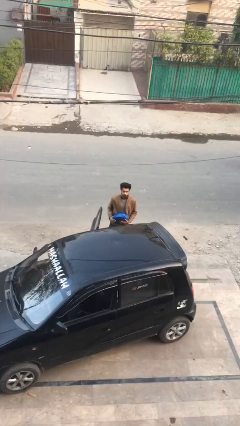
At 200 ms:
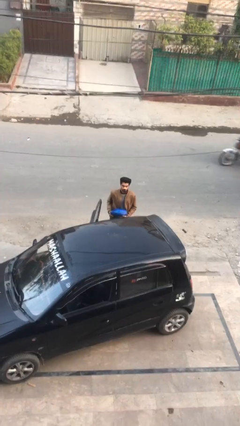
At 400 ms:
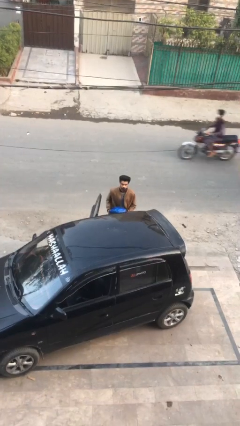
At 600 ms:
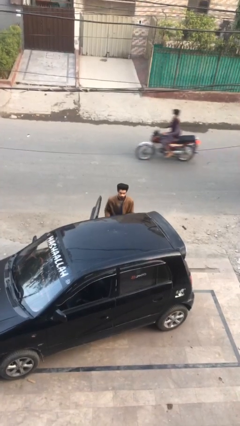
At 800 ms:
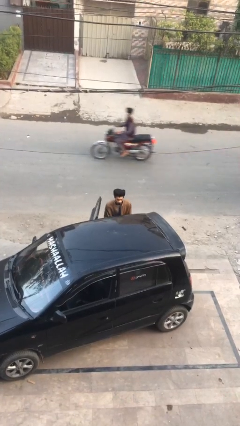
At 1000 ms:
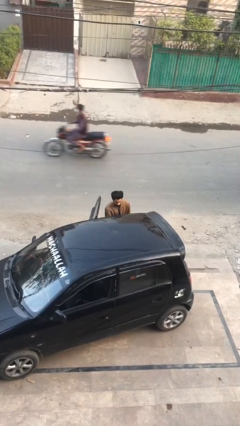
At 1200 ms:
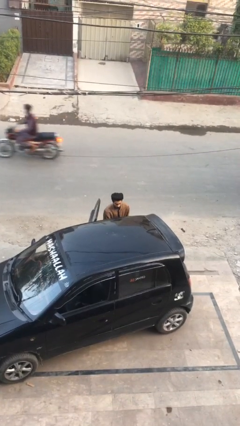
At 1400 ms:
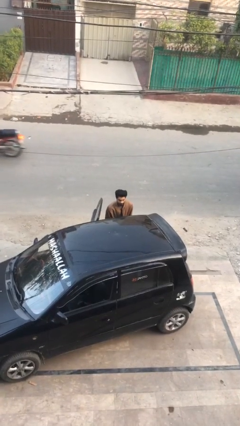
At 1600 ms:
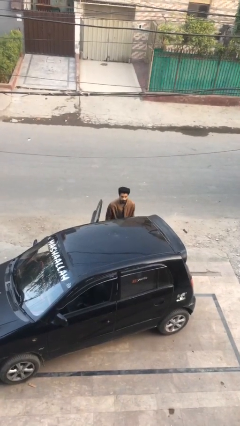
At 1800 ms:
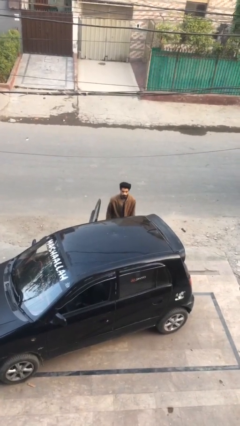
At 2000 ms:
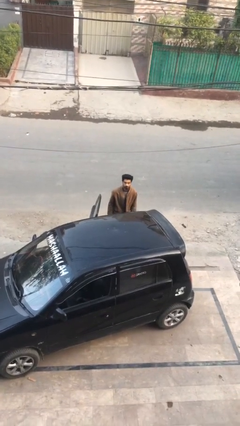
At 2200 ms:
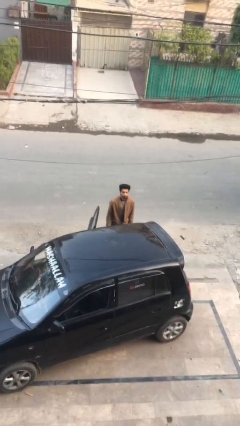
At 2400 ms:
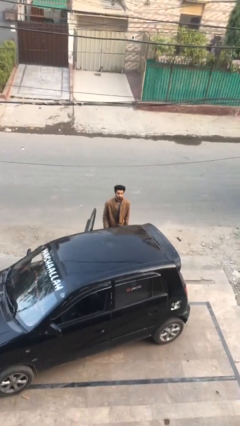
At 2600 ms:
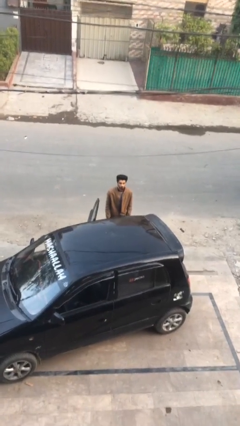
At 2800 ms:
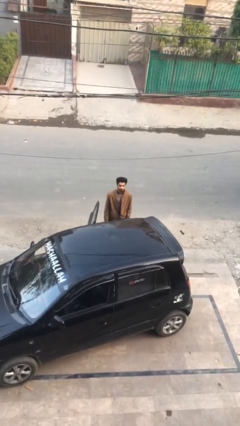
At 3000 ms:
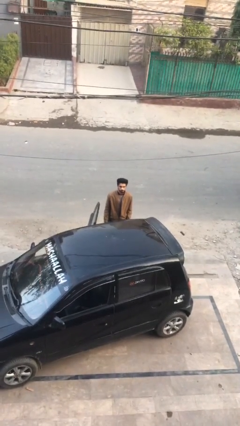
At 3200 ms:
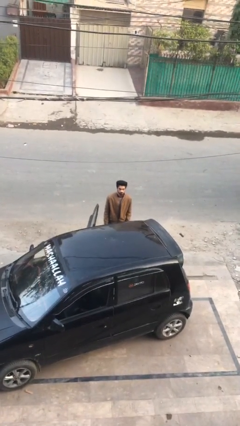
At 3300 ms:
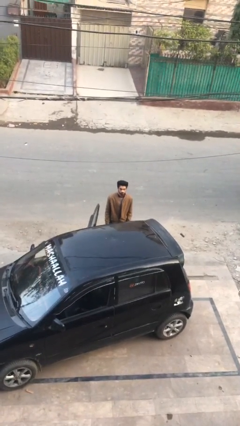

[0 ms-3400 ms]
person loads car

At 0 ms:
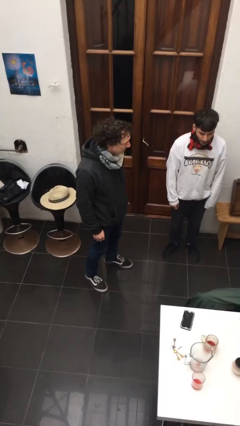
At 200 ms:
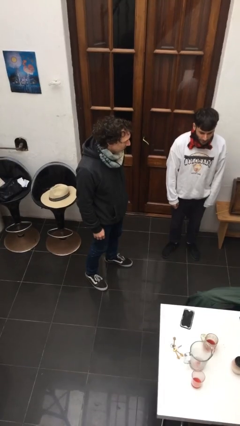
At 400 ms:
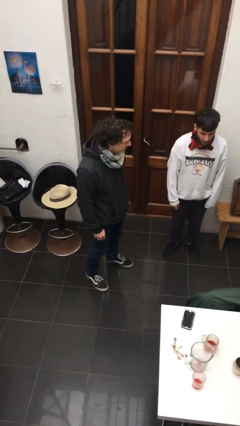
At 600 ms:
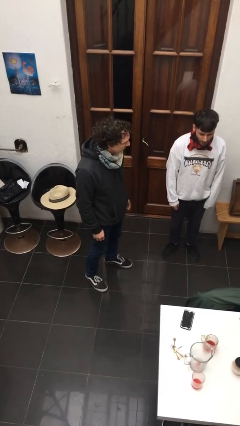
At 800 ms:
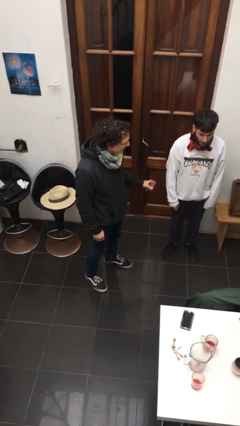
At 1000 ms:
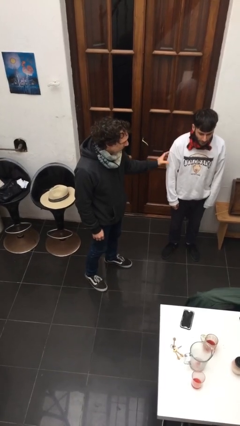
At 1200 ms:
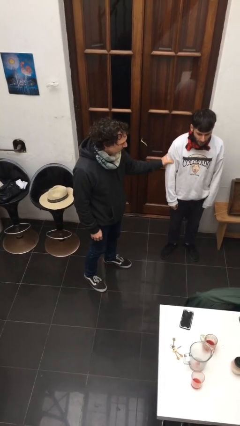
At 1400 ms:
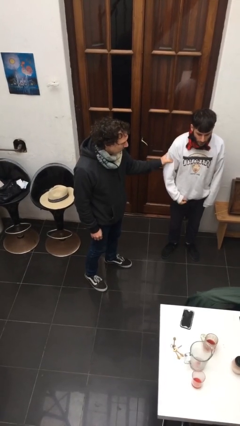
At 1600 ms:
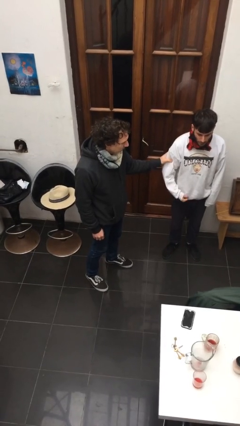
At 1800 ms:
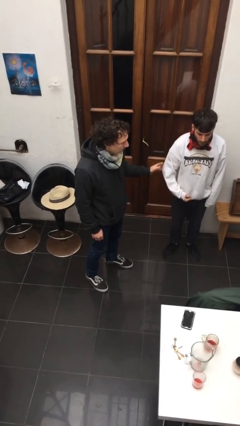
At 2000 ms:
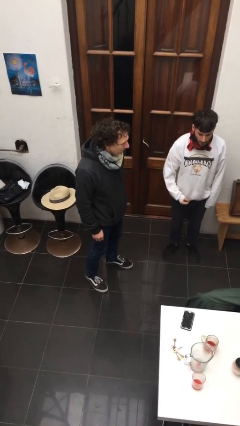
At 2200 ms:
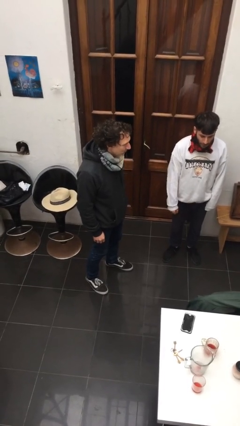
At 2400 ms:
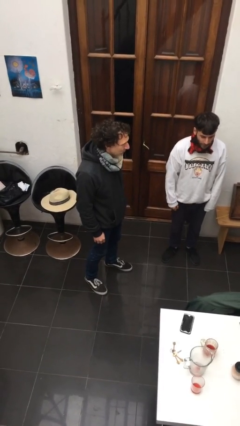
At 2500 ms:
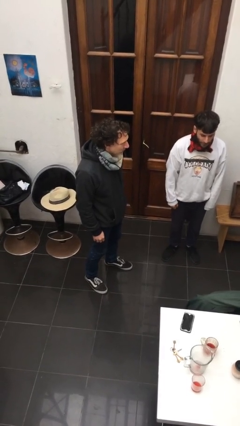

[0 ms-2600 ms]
person grabs person by bicep

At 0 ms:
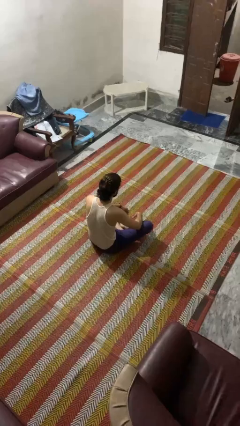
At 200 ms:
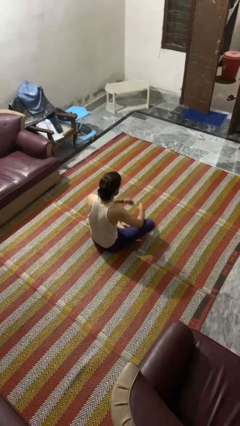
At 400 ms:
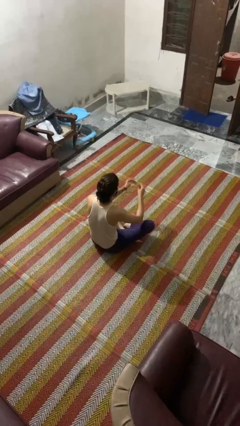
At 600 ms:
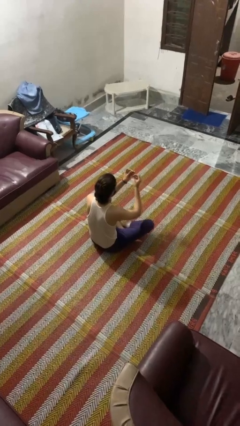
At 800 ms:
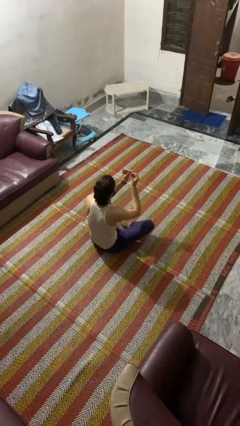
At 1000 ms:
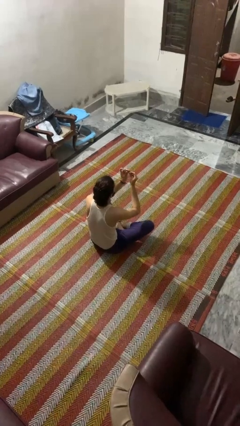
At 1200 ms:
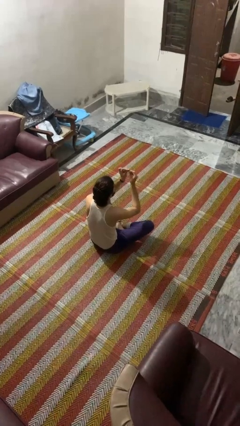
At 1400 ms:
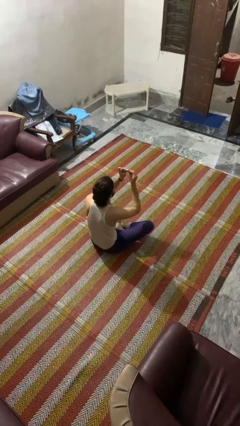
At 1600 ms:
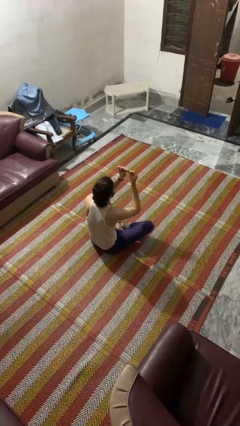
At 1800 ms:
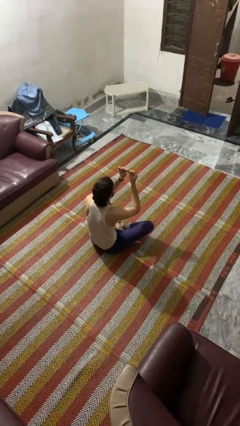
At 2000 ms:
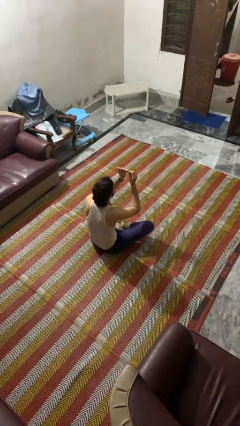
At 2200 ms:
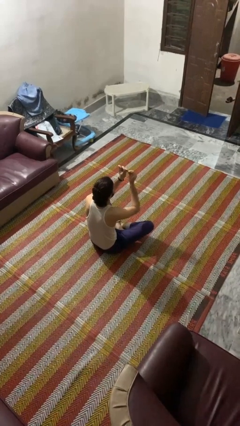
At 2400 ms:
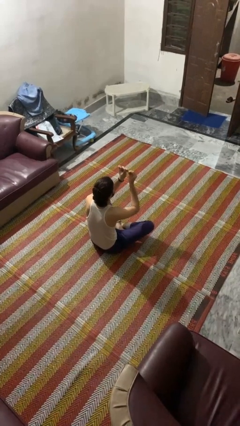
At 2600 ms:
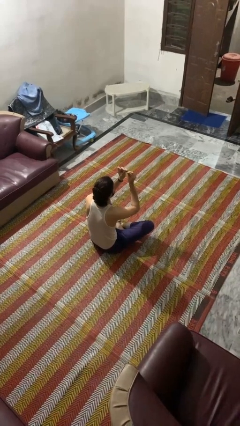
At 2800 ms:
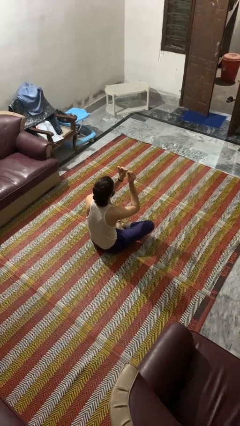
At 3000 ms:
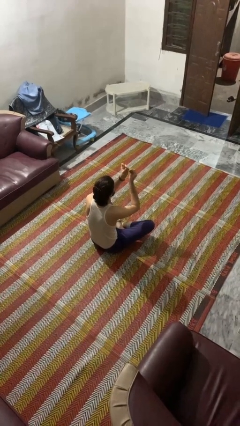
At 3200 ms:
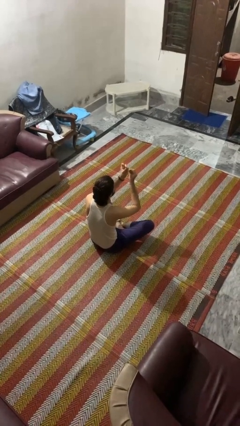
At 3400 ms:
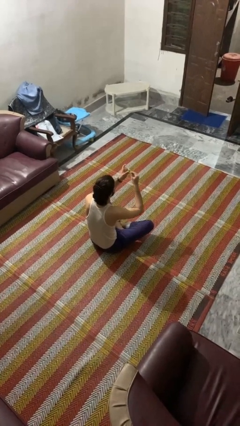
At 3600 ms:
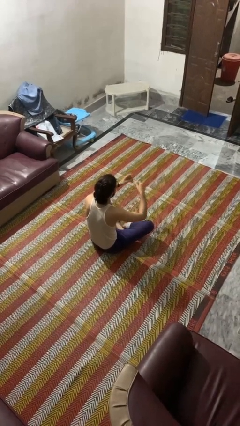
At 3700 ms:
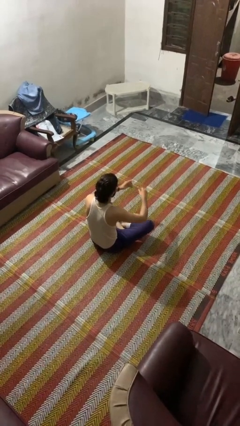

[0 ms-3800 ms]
person clips fingernails

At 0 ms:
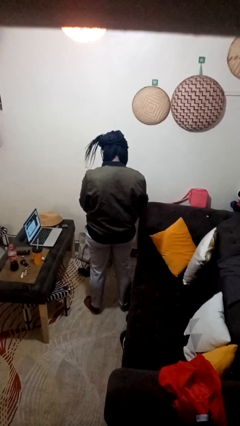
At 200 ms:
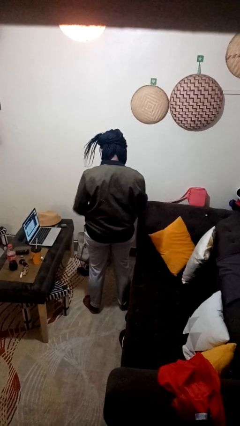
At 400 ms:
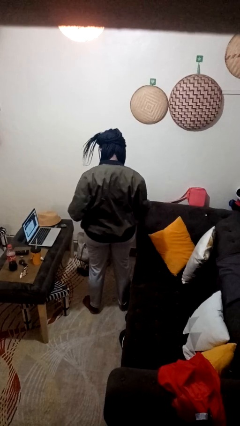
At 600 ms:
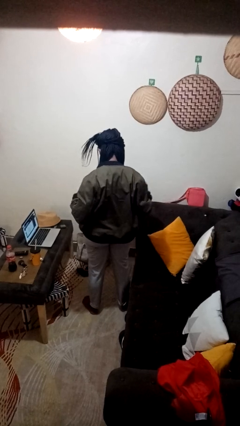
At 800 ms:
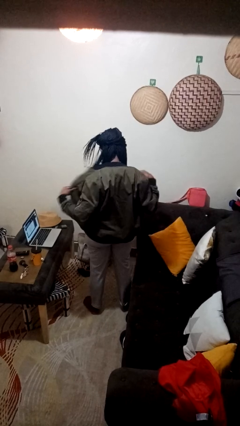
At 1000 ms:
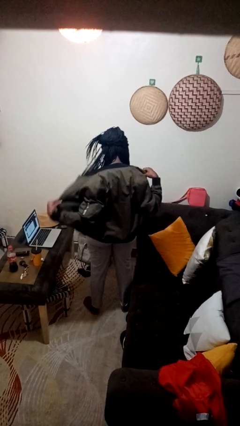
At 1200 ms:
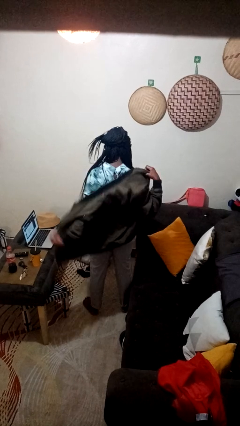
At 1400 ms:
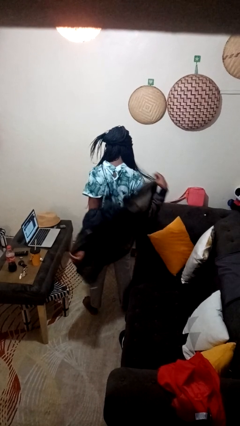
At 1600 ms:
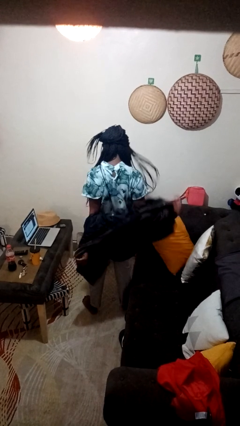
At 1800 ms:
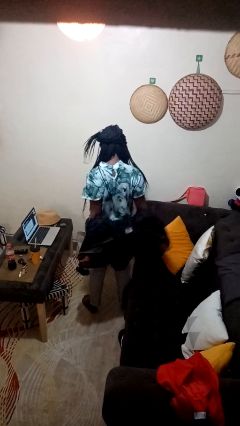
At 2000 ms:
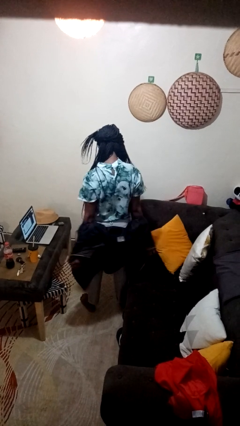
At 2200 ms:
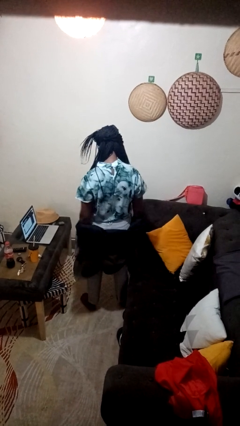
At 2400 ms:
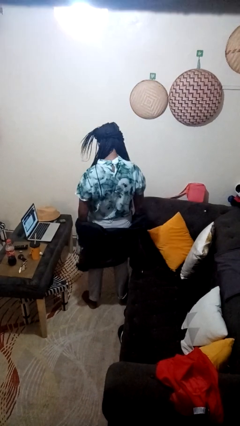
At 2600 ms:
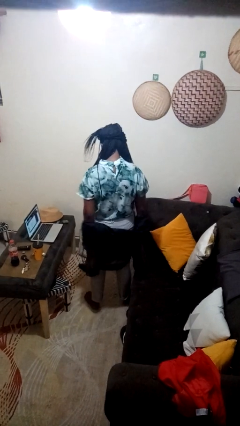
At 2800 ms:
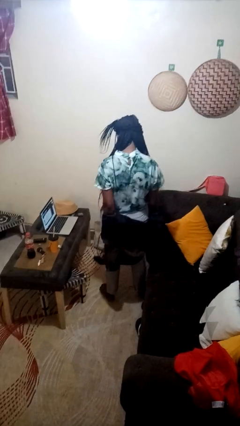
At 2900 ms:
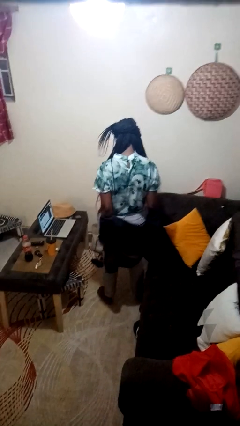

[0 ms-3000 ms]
person takes off jacket

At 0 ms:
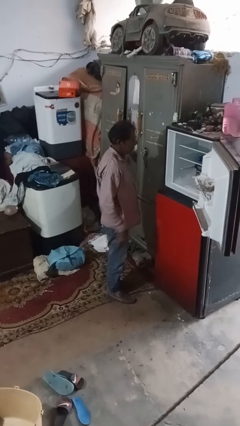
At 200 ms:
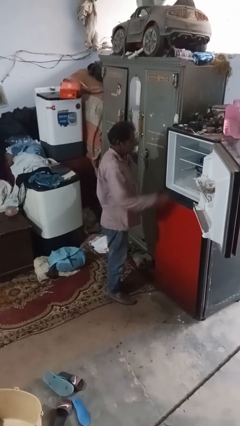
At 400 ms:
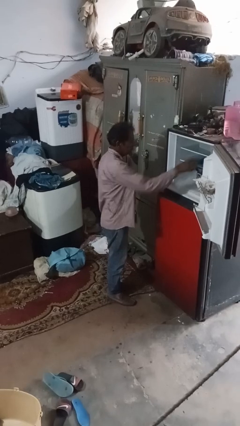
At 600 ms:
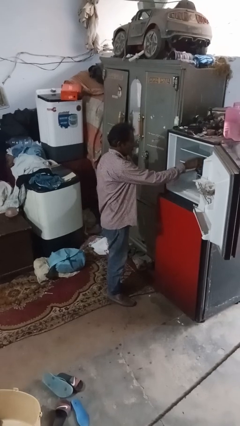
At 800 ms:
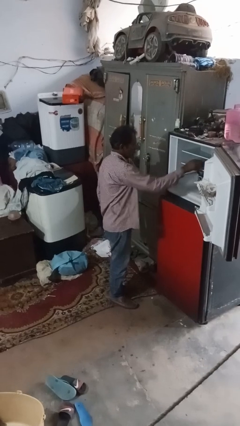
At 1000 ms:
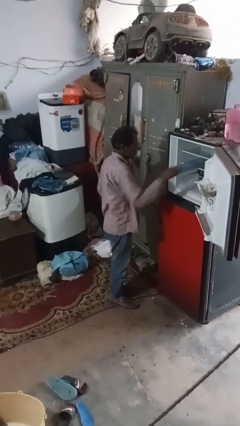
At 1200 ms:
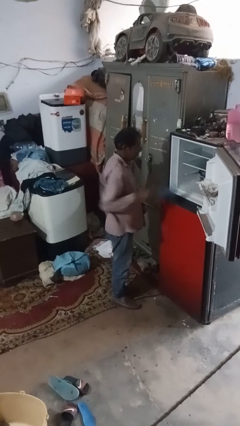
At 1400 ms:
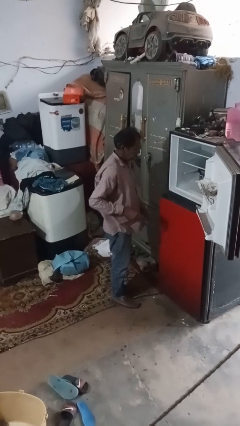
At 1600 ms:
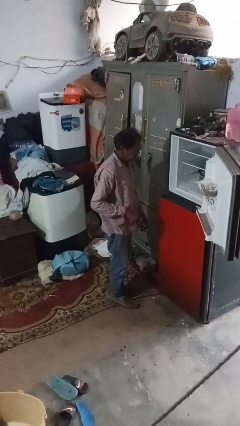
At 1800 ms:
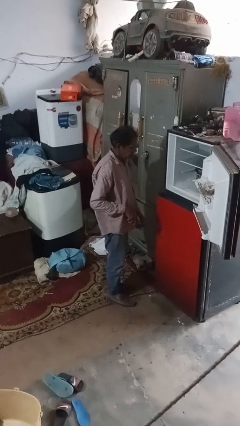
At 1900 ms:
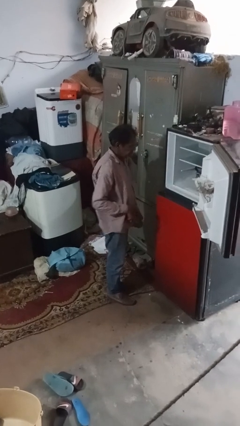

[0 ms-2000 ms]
person takes object from refrigerator

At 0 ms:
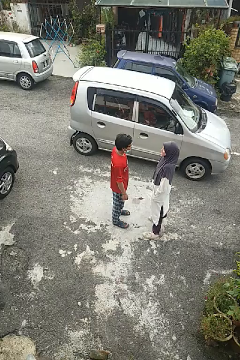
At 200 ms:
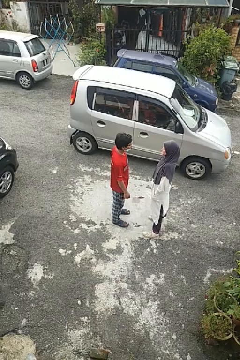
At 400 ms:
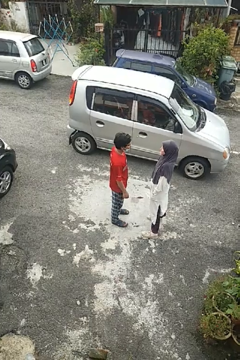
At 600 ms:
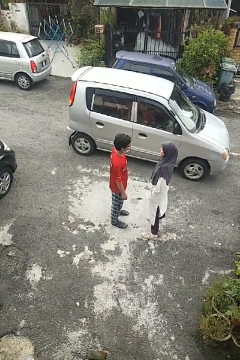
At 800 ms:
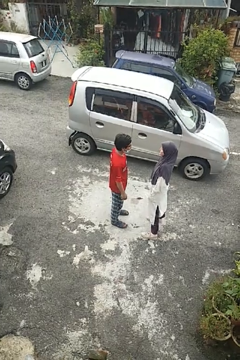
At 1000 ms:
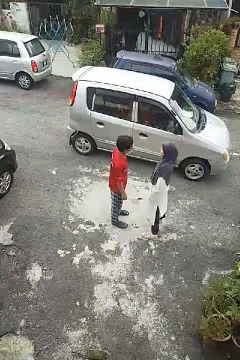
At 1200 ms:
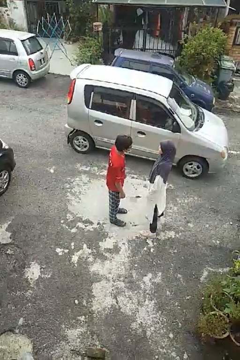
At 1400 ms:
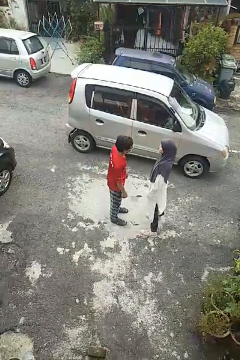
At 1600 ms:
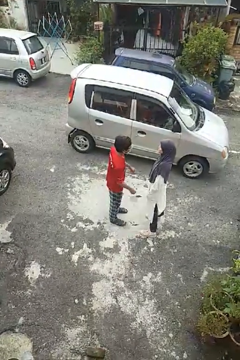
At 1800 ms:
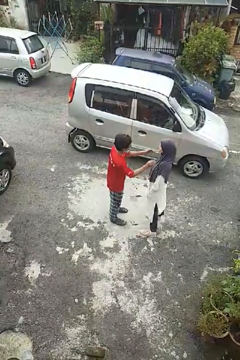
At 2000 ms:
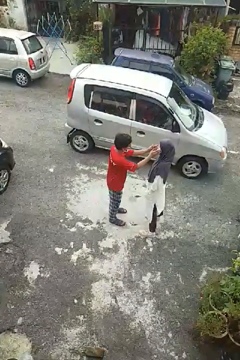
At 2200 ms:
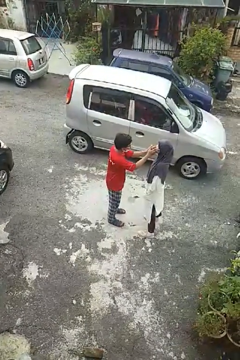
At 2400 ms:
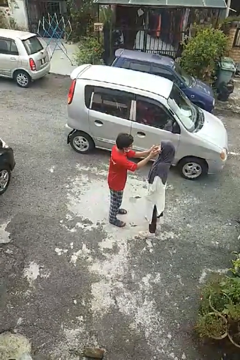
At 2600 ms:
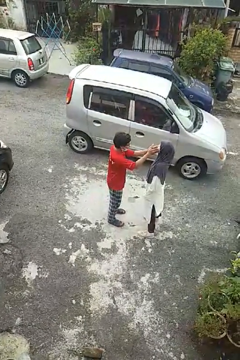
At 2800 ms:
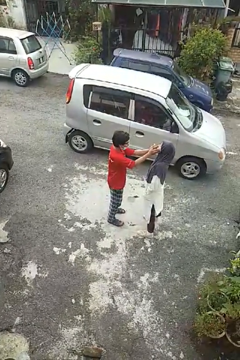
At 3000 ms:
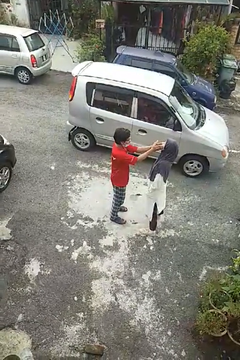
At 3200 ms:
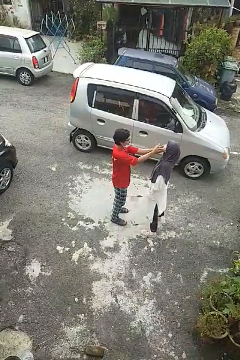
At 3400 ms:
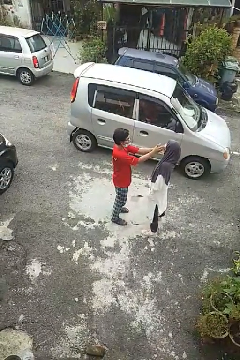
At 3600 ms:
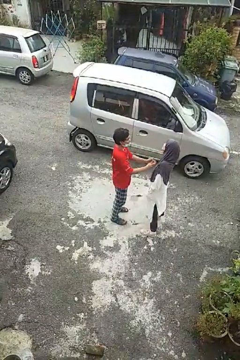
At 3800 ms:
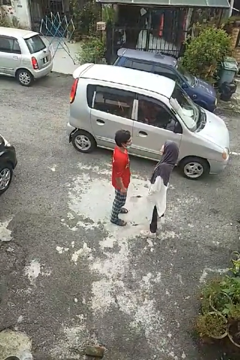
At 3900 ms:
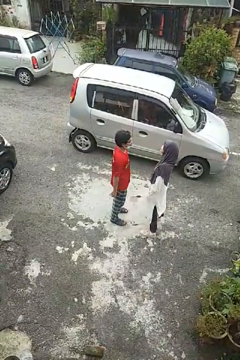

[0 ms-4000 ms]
person touches face of person
